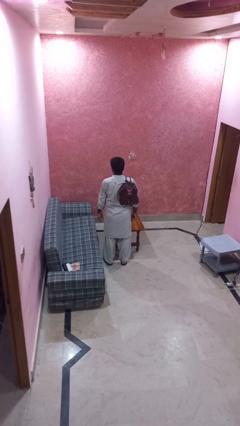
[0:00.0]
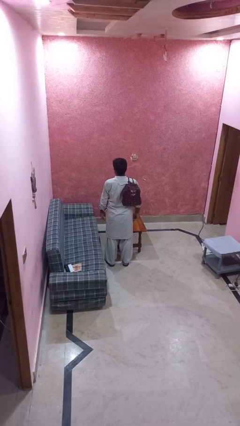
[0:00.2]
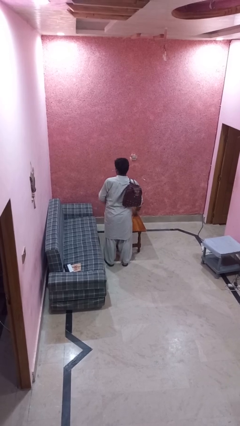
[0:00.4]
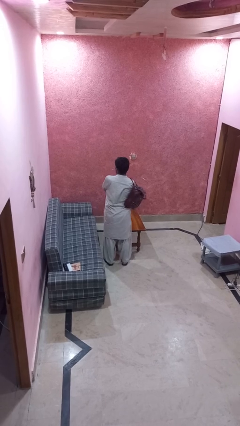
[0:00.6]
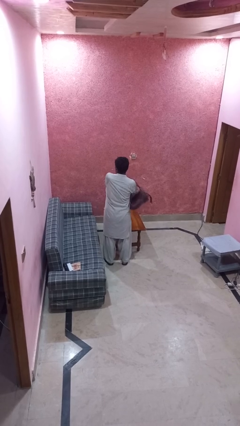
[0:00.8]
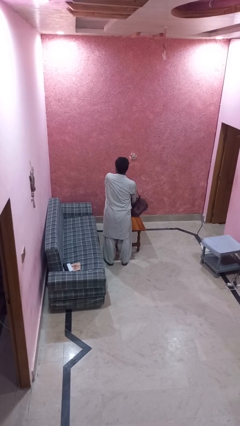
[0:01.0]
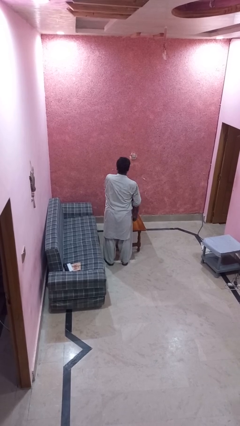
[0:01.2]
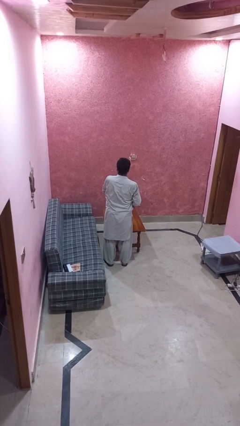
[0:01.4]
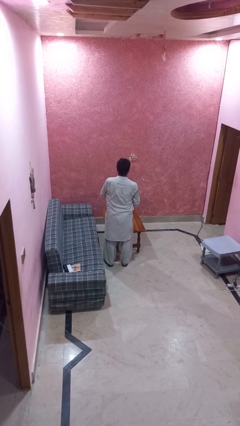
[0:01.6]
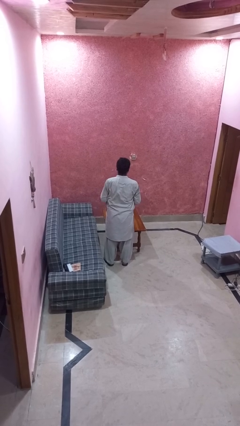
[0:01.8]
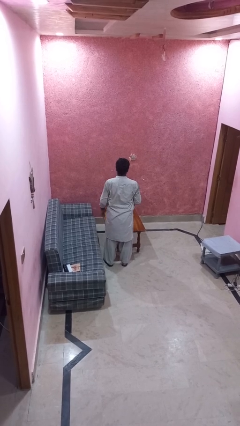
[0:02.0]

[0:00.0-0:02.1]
person takes off backpack

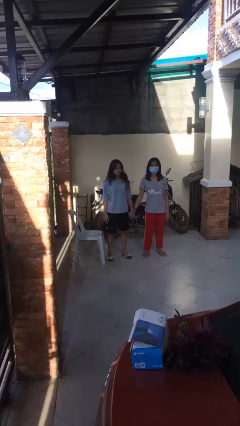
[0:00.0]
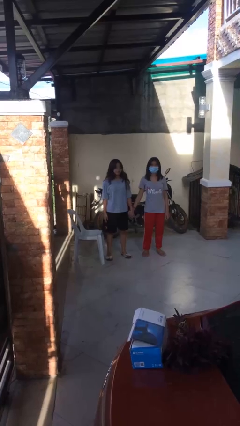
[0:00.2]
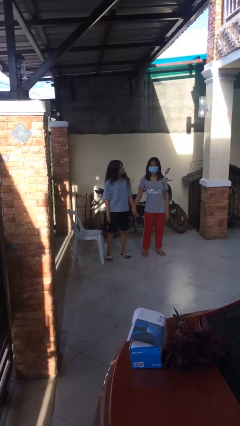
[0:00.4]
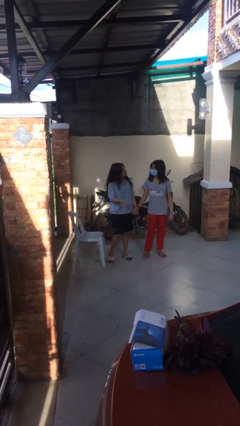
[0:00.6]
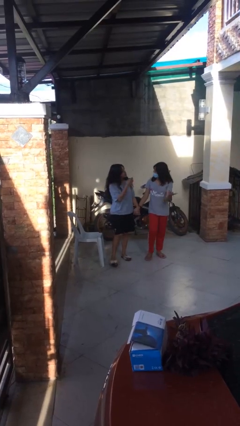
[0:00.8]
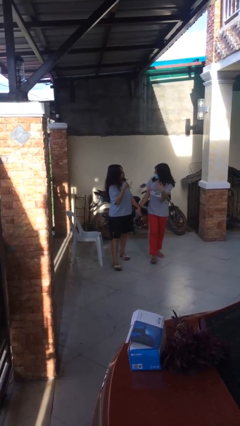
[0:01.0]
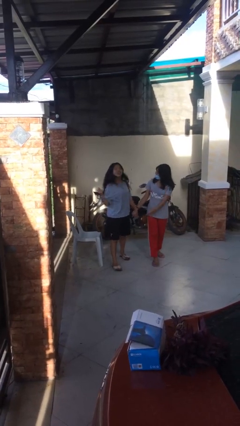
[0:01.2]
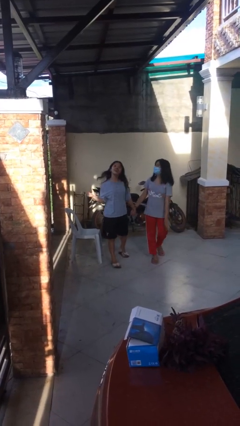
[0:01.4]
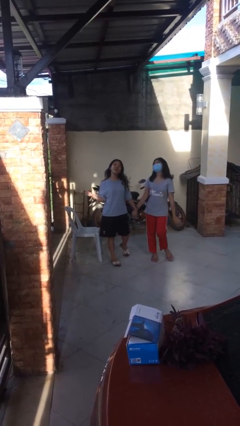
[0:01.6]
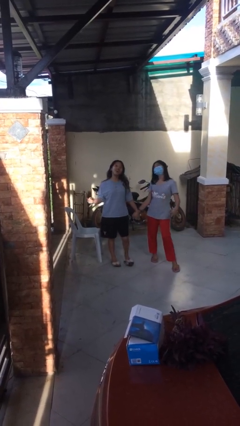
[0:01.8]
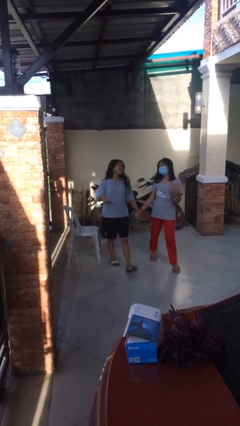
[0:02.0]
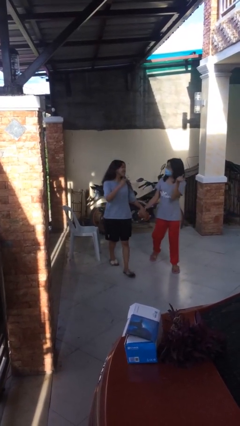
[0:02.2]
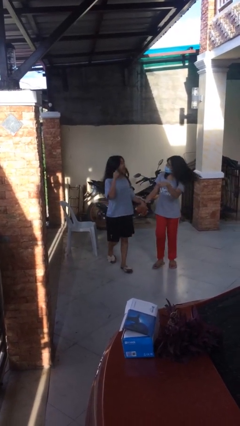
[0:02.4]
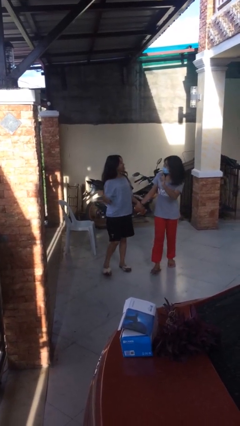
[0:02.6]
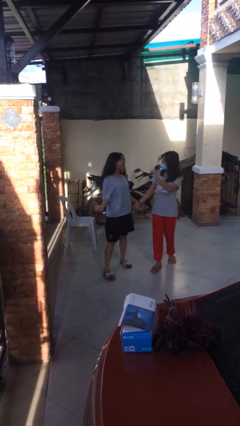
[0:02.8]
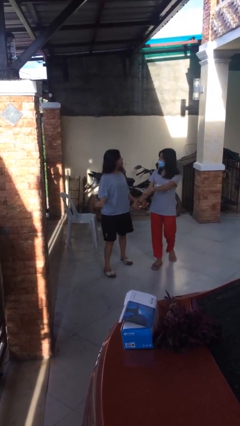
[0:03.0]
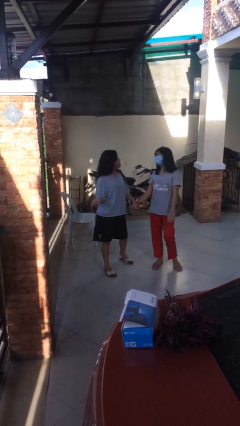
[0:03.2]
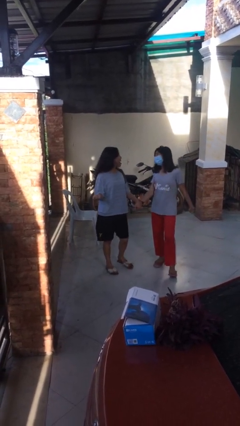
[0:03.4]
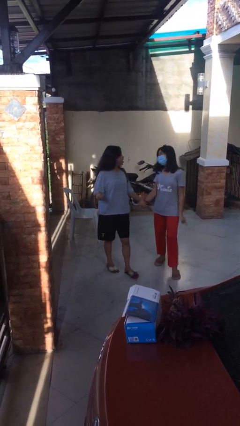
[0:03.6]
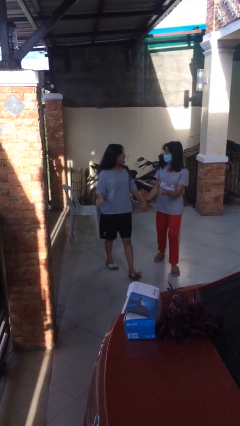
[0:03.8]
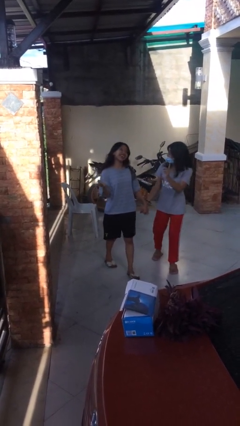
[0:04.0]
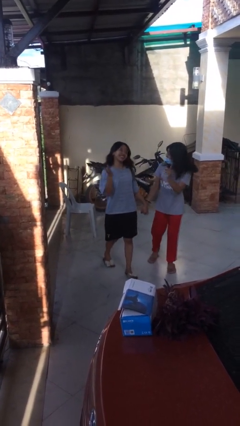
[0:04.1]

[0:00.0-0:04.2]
person holds hand

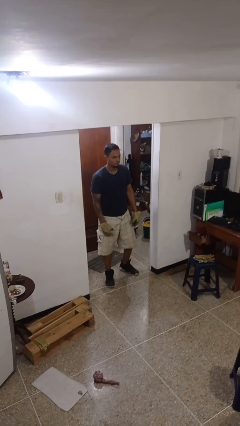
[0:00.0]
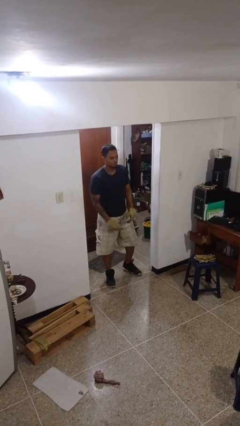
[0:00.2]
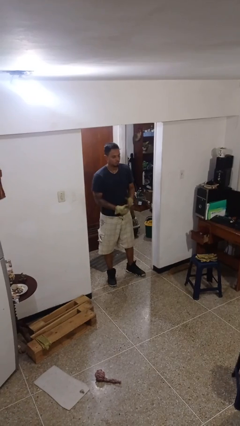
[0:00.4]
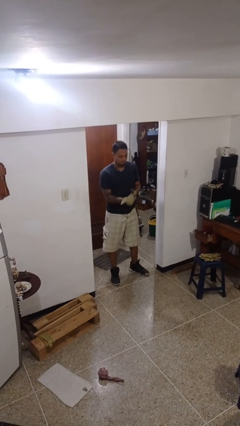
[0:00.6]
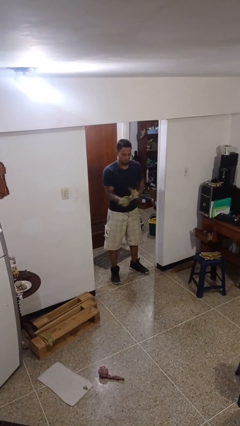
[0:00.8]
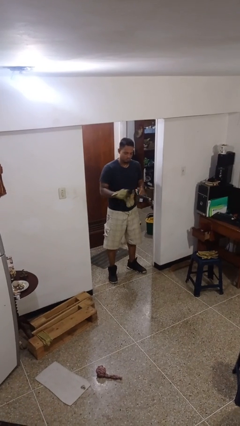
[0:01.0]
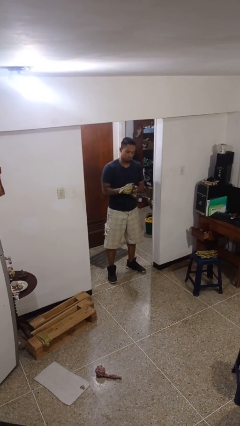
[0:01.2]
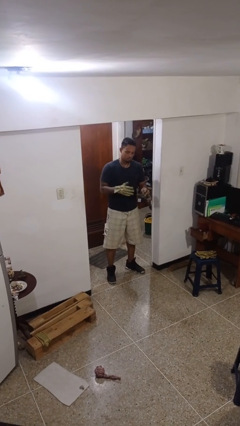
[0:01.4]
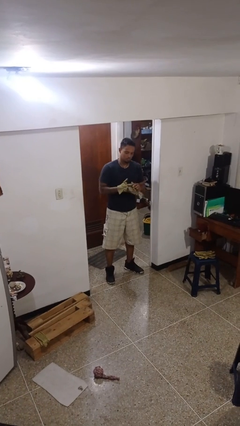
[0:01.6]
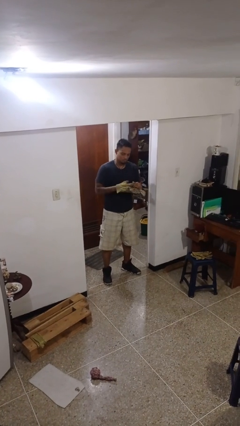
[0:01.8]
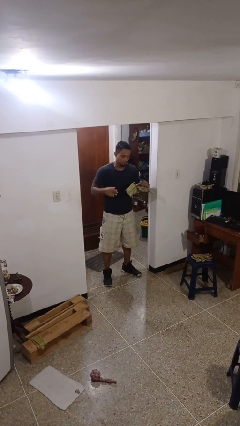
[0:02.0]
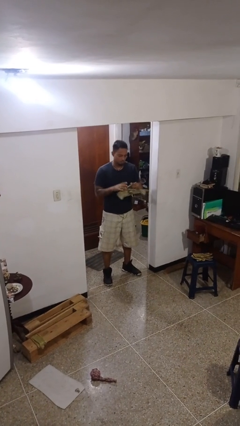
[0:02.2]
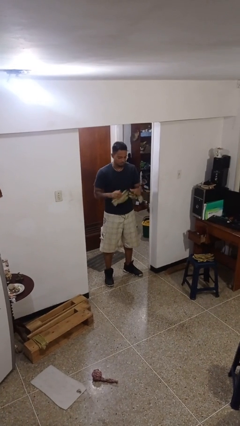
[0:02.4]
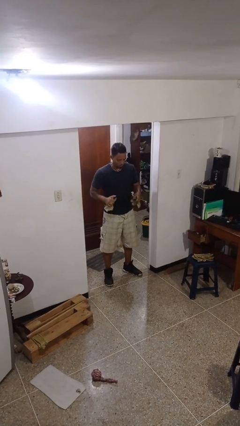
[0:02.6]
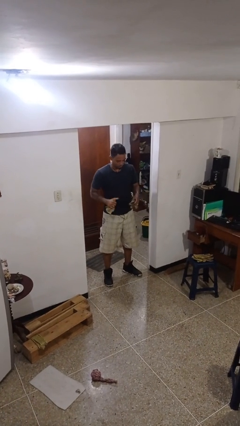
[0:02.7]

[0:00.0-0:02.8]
person takes off gloves

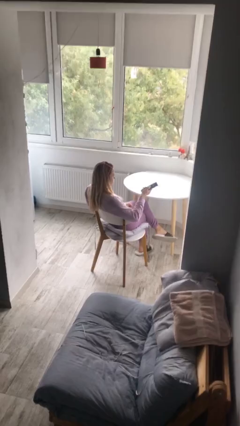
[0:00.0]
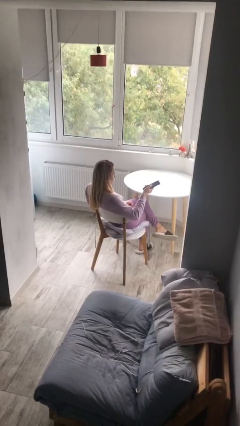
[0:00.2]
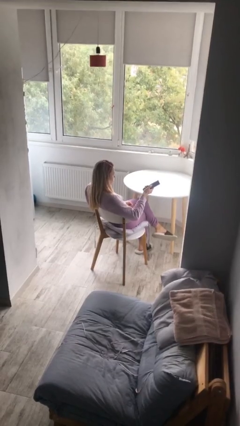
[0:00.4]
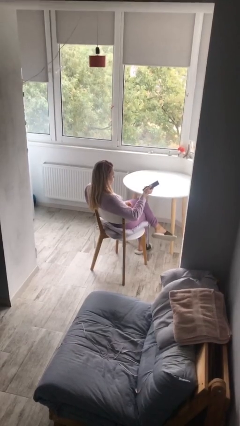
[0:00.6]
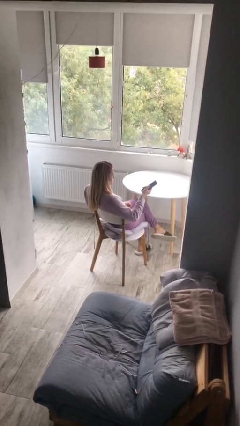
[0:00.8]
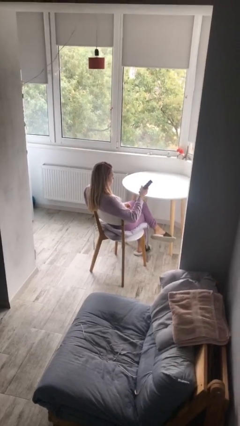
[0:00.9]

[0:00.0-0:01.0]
person uses television remote

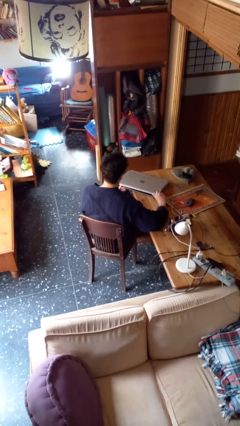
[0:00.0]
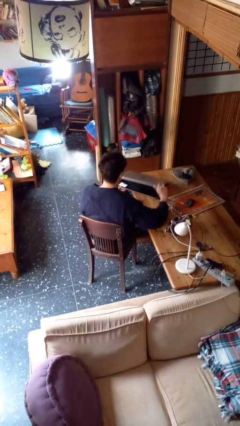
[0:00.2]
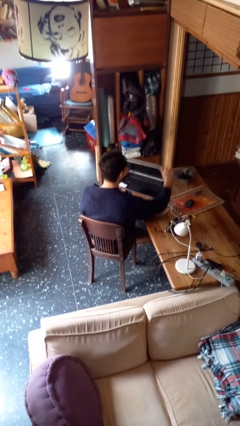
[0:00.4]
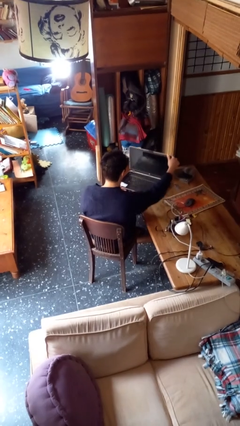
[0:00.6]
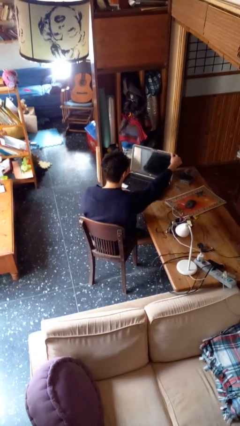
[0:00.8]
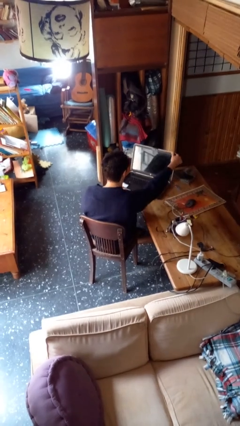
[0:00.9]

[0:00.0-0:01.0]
person opens laptop

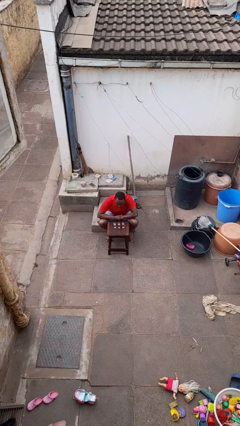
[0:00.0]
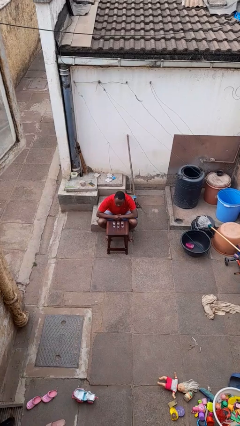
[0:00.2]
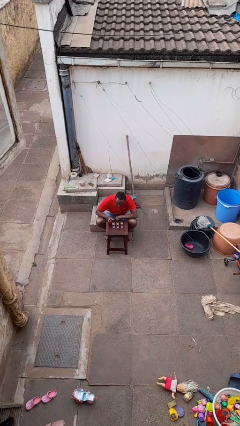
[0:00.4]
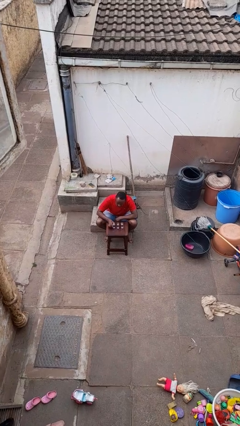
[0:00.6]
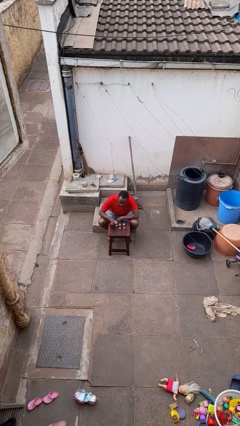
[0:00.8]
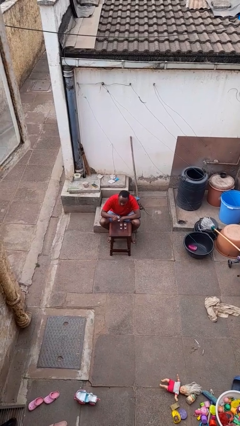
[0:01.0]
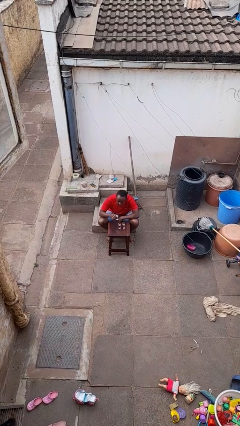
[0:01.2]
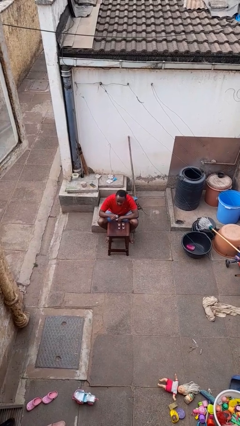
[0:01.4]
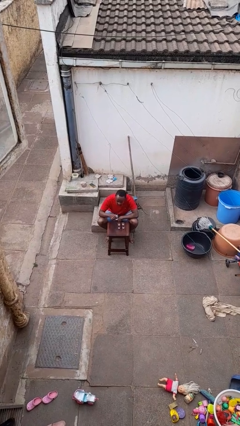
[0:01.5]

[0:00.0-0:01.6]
person picks up object from table

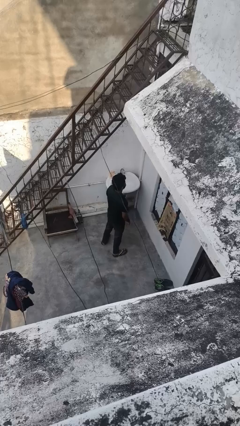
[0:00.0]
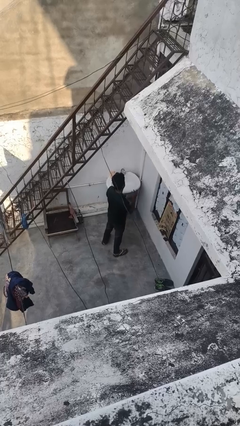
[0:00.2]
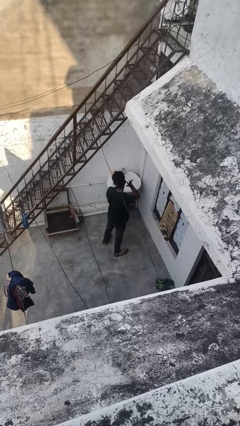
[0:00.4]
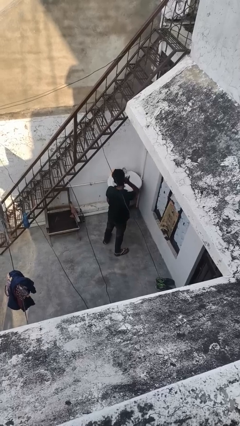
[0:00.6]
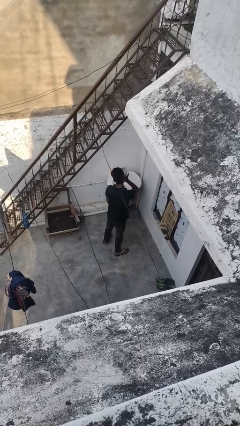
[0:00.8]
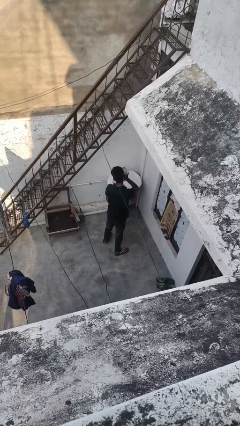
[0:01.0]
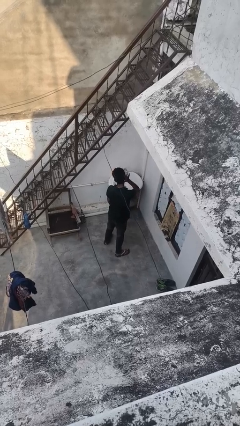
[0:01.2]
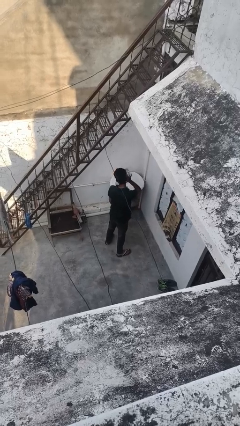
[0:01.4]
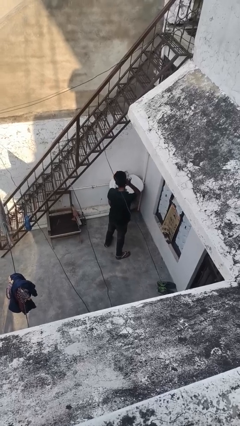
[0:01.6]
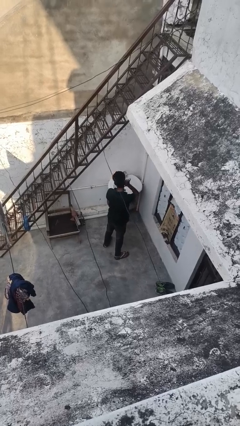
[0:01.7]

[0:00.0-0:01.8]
person gestures listen closely

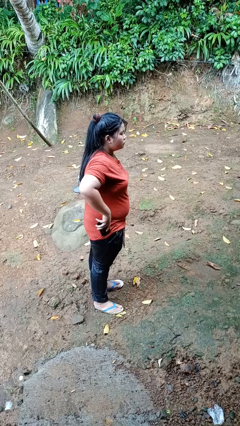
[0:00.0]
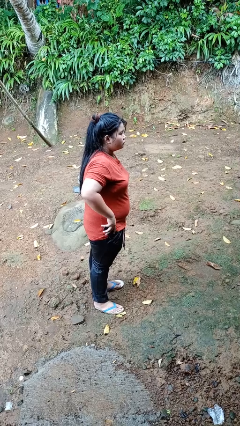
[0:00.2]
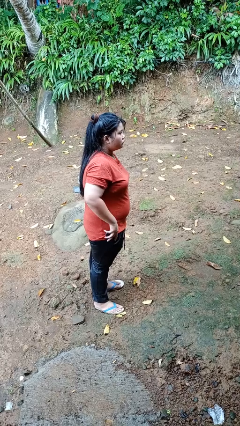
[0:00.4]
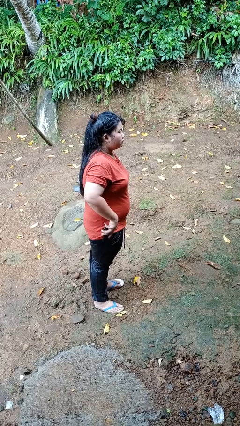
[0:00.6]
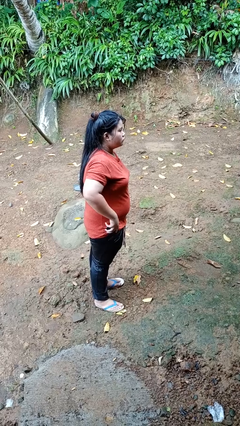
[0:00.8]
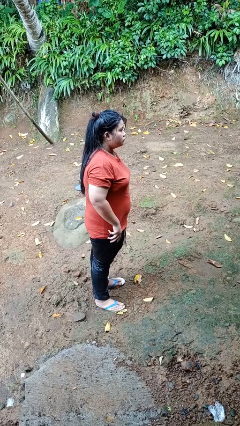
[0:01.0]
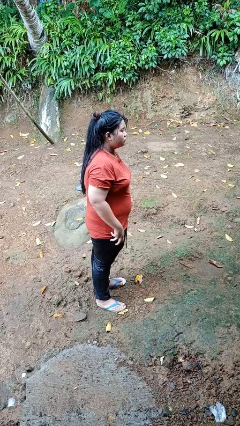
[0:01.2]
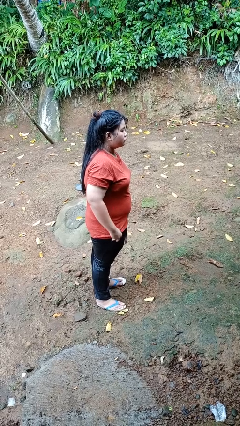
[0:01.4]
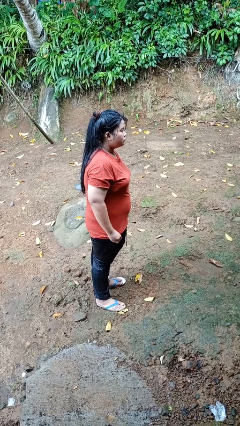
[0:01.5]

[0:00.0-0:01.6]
person puts phone into pocket

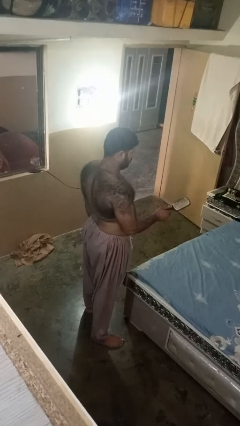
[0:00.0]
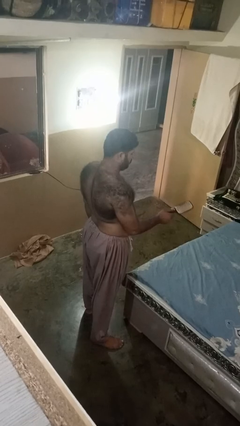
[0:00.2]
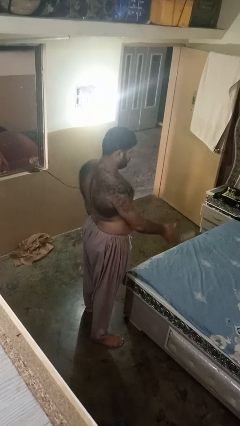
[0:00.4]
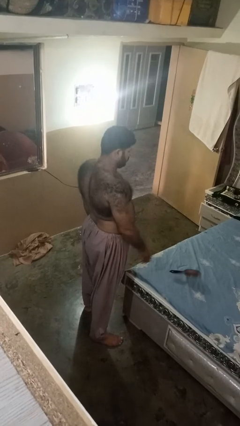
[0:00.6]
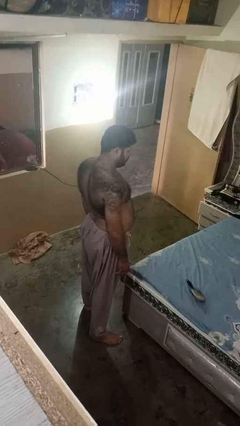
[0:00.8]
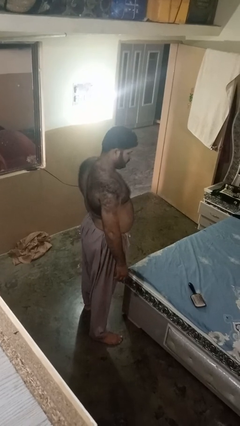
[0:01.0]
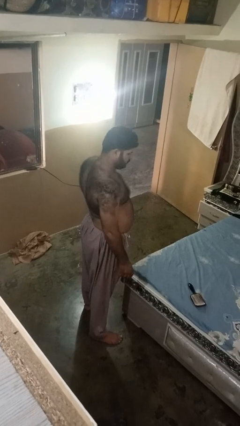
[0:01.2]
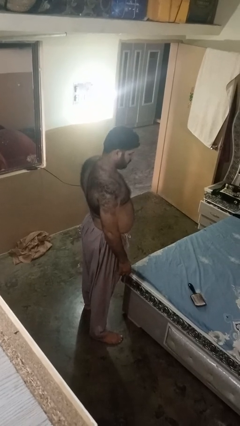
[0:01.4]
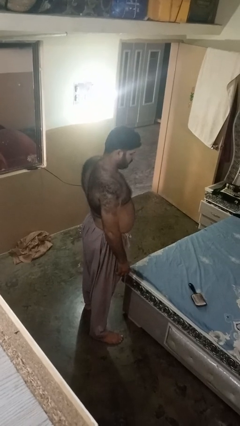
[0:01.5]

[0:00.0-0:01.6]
person throws object on bed
